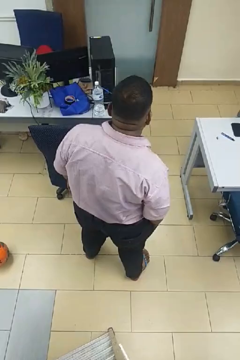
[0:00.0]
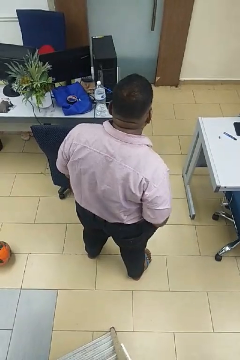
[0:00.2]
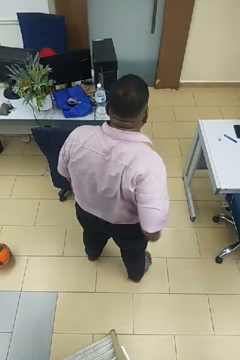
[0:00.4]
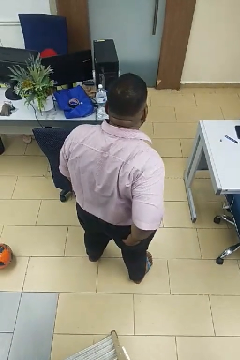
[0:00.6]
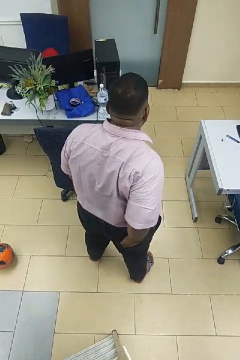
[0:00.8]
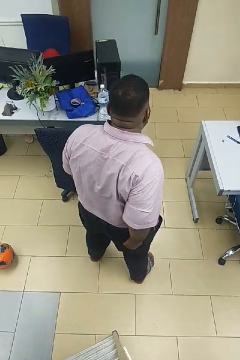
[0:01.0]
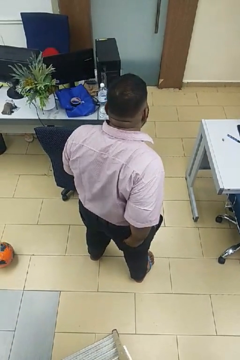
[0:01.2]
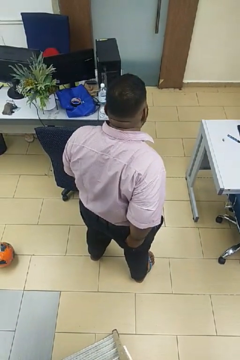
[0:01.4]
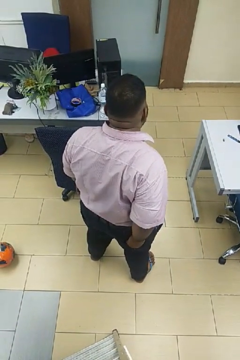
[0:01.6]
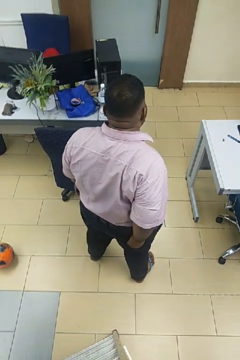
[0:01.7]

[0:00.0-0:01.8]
person puts hands in back pockets

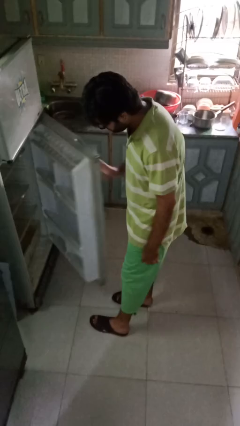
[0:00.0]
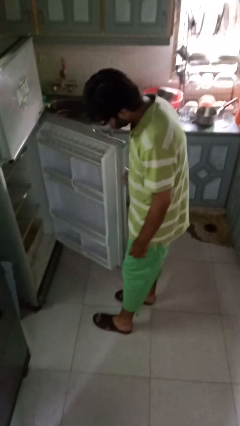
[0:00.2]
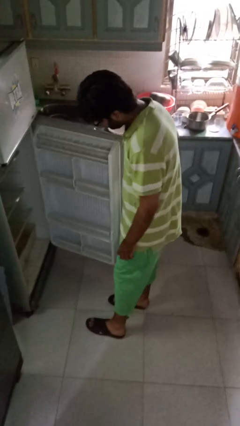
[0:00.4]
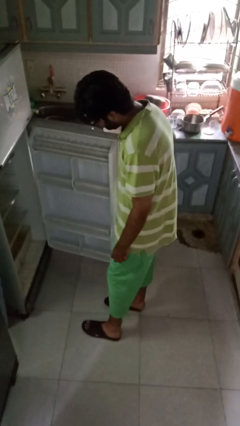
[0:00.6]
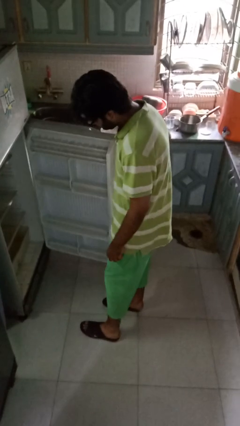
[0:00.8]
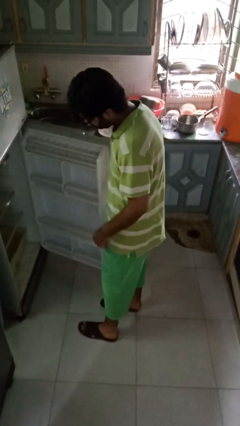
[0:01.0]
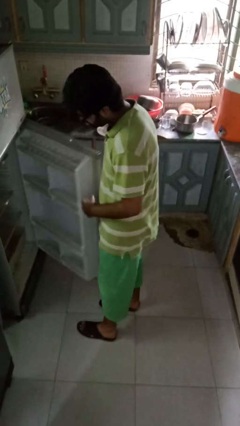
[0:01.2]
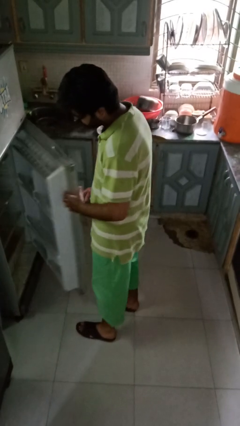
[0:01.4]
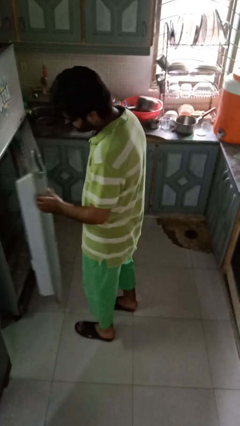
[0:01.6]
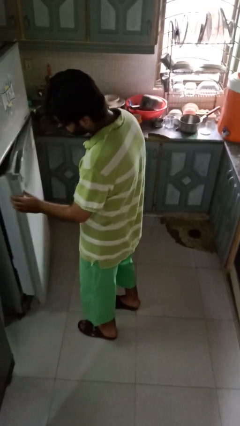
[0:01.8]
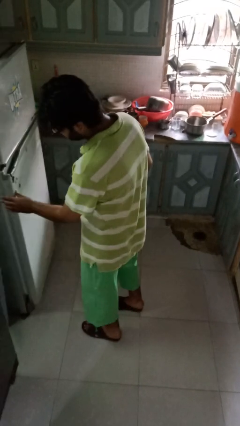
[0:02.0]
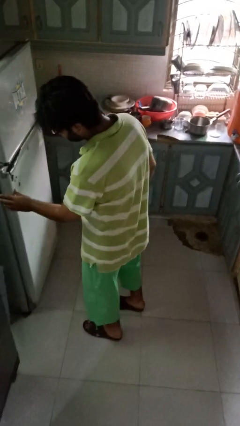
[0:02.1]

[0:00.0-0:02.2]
person closes refrigerator

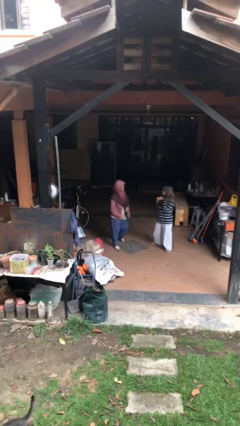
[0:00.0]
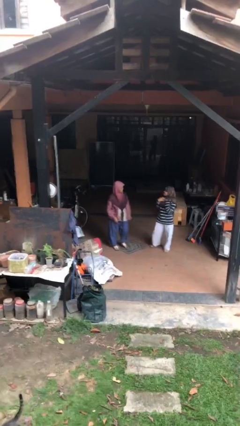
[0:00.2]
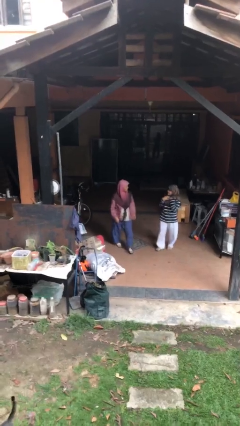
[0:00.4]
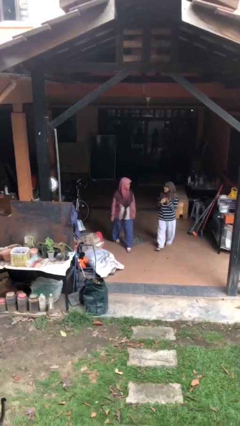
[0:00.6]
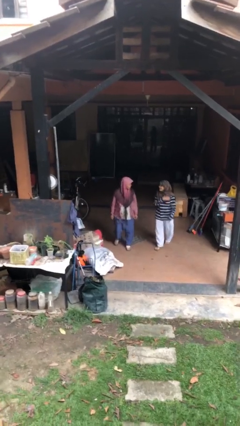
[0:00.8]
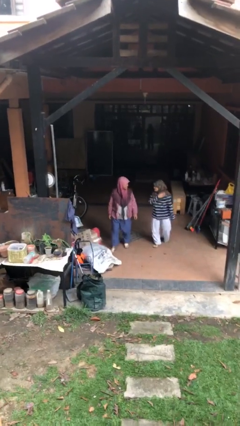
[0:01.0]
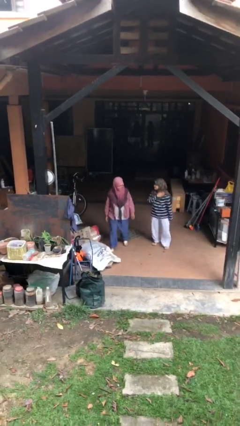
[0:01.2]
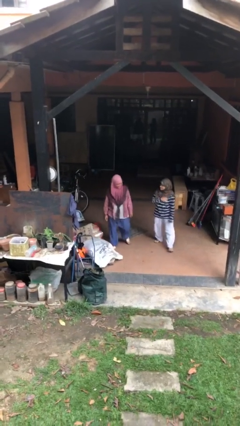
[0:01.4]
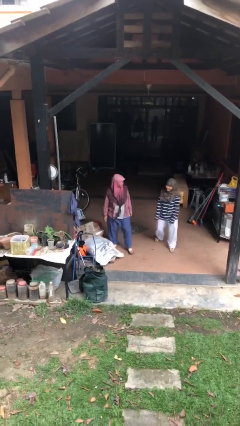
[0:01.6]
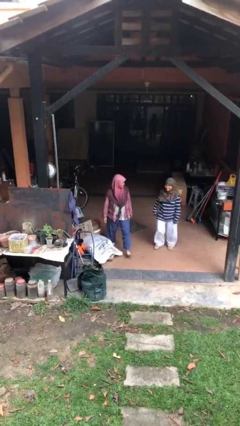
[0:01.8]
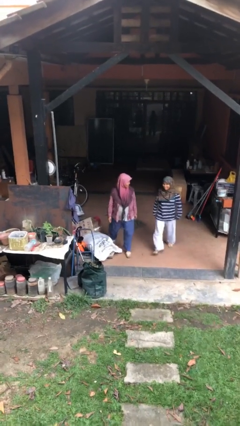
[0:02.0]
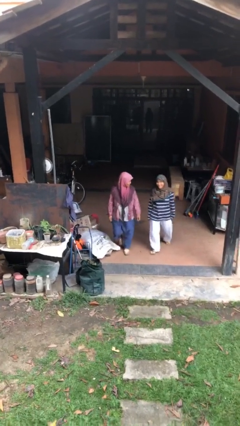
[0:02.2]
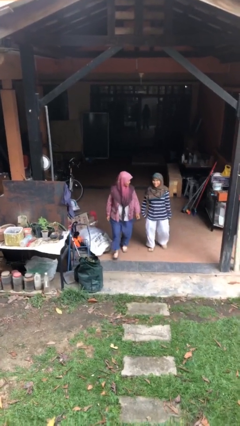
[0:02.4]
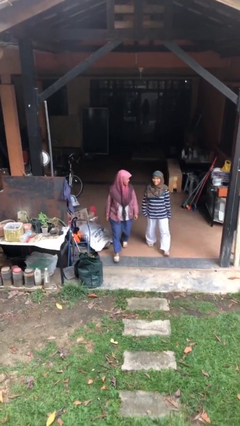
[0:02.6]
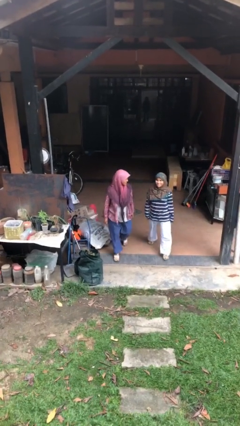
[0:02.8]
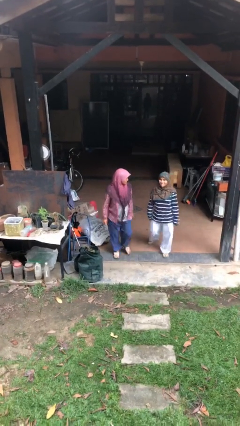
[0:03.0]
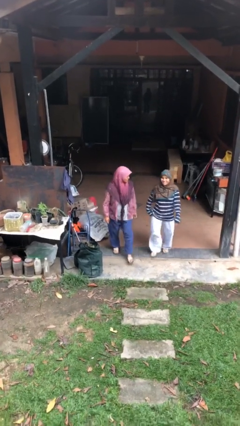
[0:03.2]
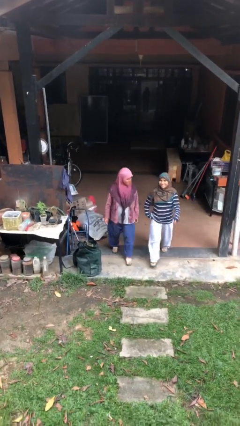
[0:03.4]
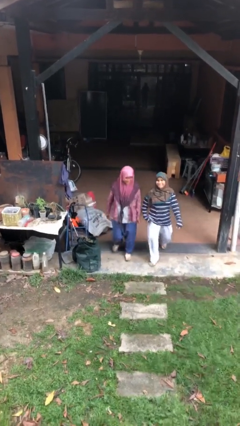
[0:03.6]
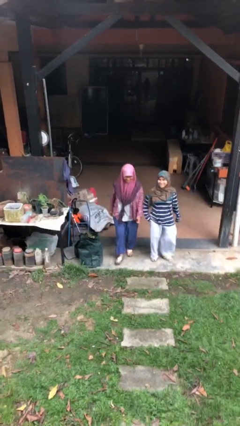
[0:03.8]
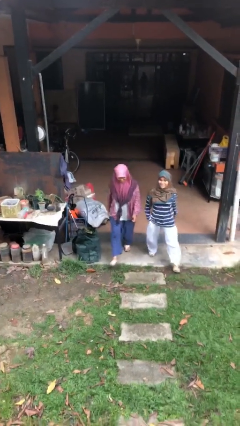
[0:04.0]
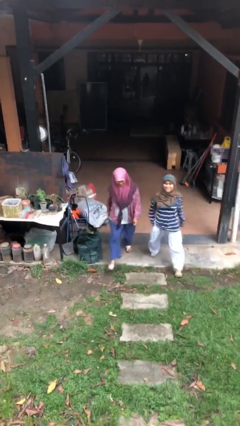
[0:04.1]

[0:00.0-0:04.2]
person talks to person

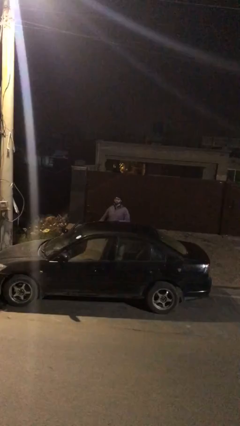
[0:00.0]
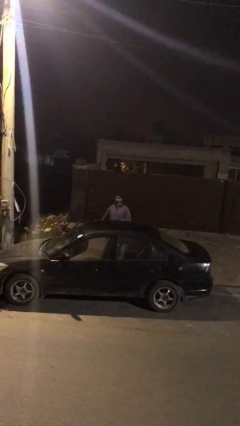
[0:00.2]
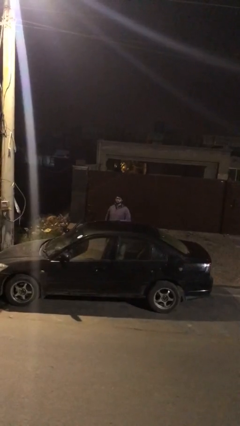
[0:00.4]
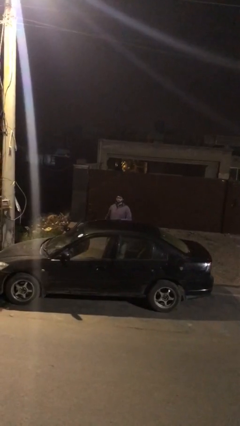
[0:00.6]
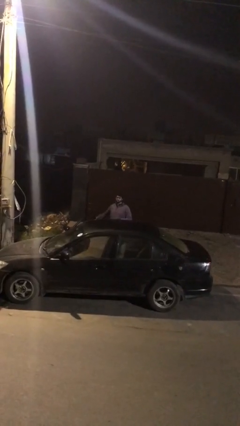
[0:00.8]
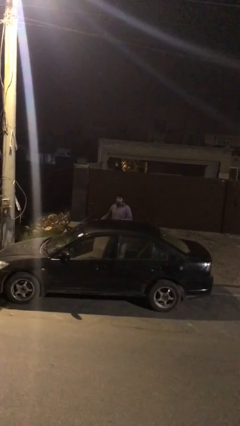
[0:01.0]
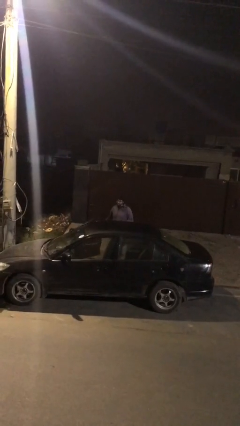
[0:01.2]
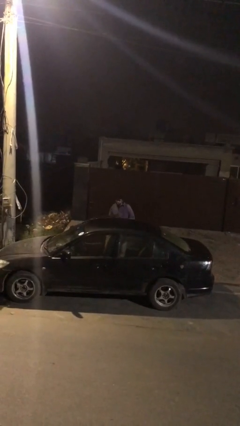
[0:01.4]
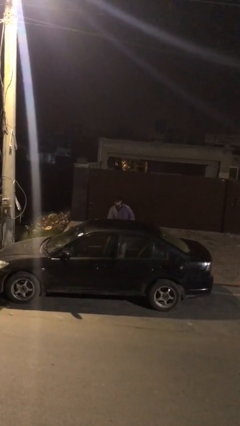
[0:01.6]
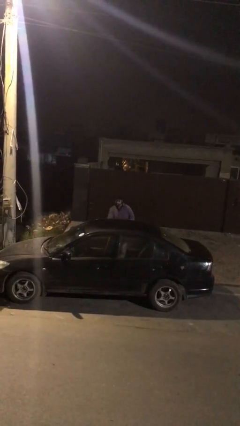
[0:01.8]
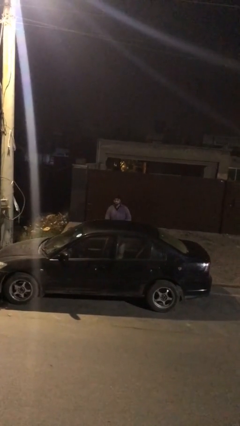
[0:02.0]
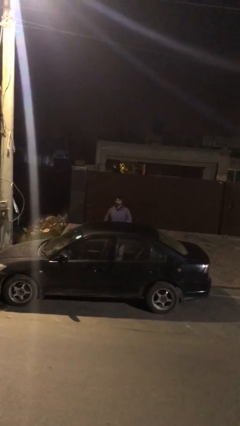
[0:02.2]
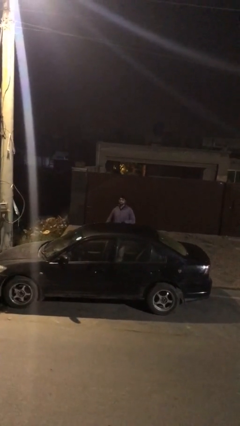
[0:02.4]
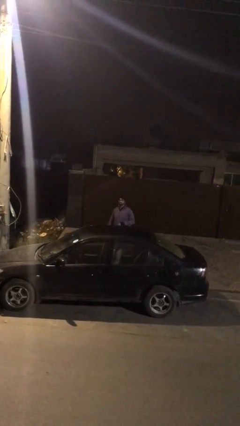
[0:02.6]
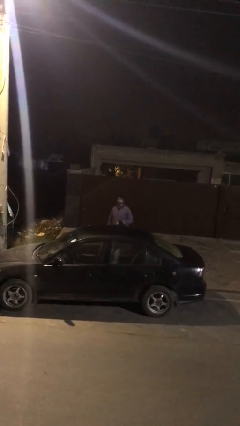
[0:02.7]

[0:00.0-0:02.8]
person closes car door

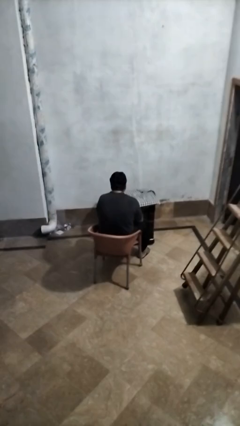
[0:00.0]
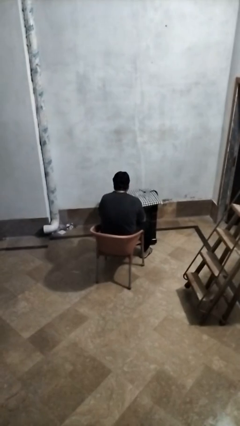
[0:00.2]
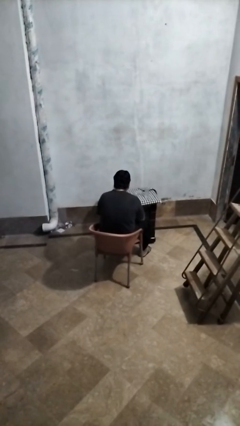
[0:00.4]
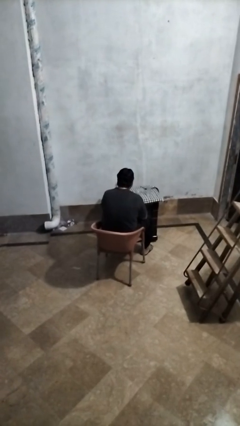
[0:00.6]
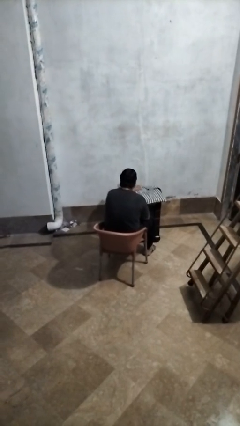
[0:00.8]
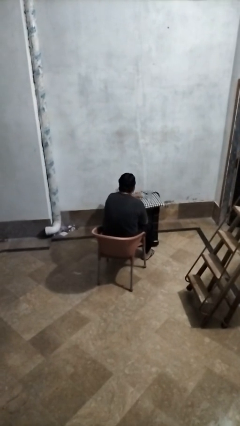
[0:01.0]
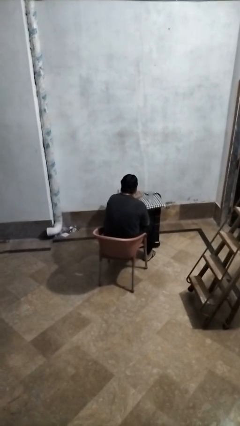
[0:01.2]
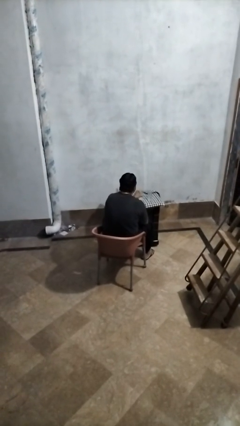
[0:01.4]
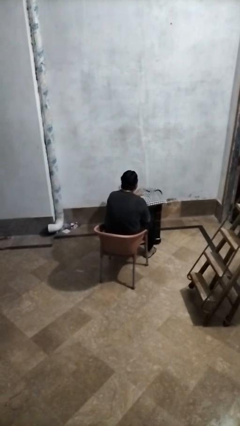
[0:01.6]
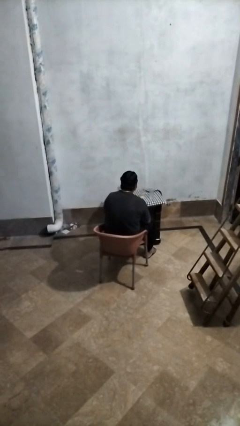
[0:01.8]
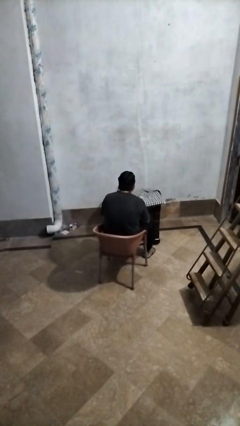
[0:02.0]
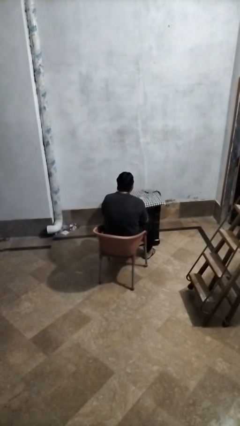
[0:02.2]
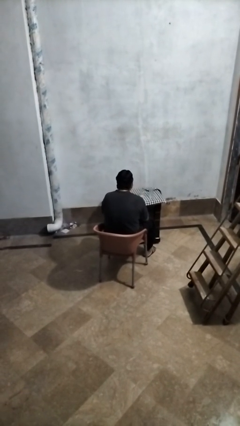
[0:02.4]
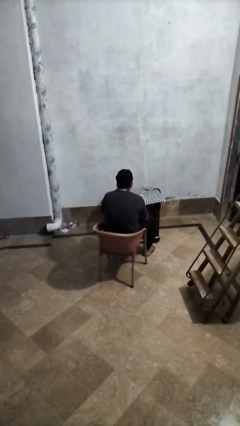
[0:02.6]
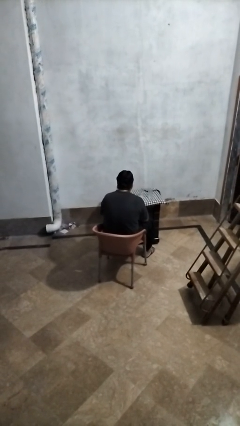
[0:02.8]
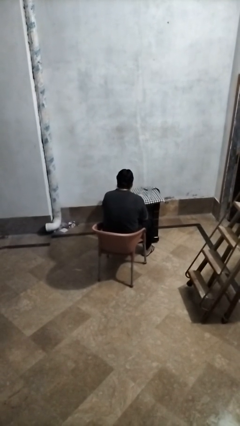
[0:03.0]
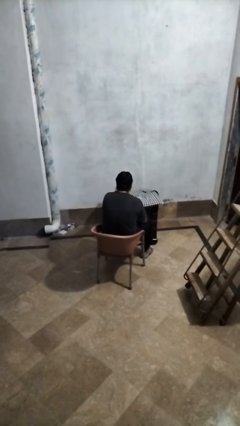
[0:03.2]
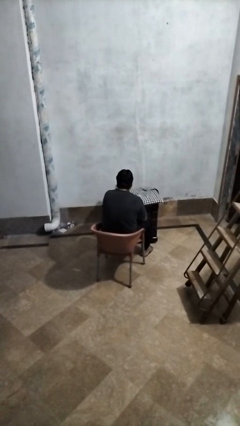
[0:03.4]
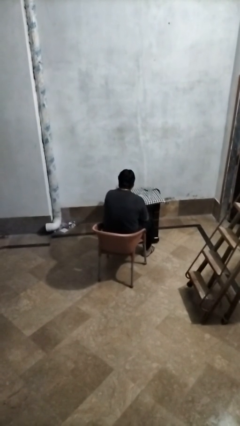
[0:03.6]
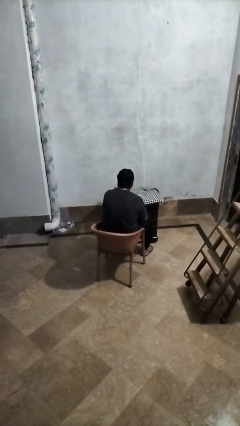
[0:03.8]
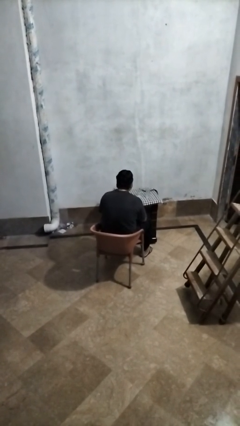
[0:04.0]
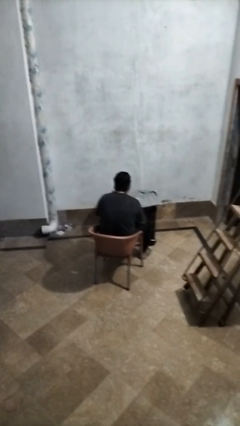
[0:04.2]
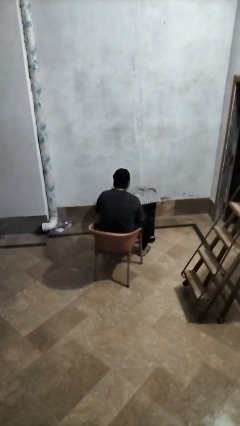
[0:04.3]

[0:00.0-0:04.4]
person sets upright glass

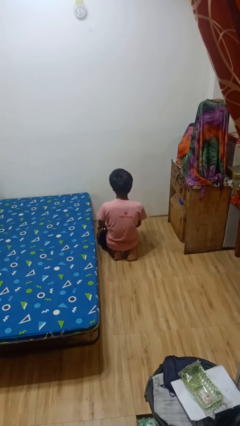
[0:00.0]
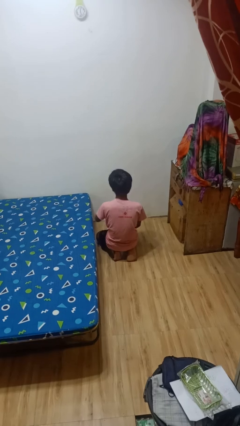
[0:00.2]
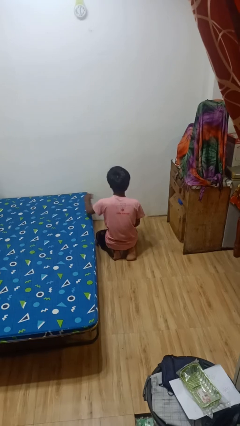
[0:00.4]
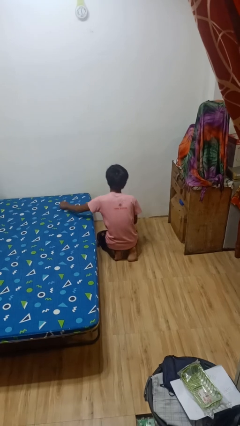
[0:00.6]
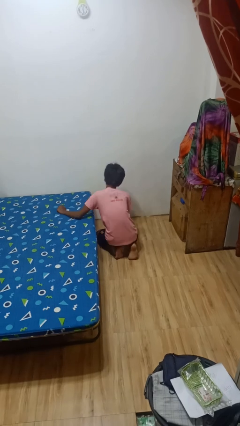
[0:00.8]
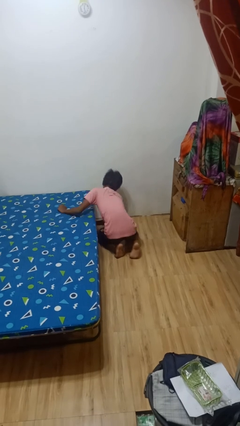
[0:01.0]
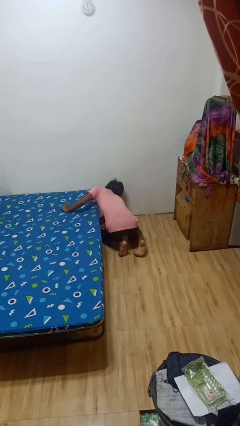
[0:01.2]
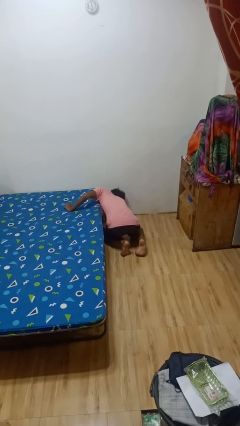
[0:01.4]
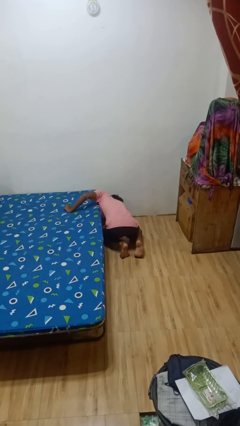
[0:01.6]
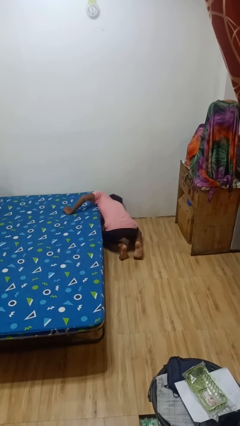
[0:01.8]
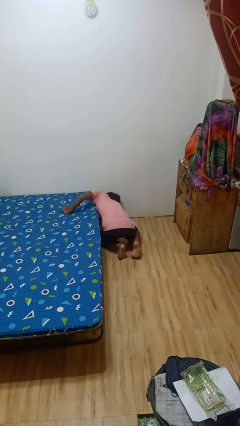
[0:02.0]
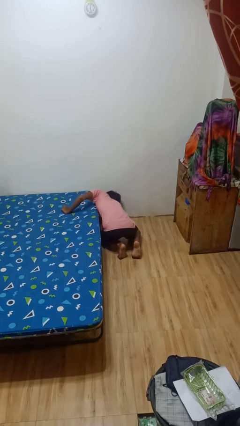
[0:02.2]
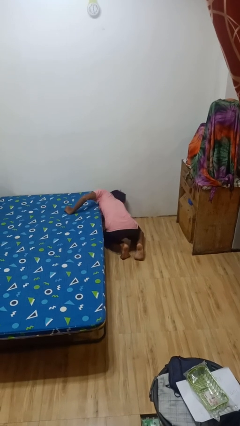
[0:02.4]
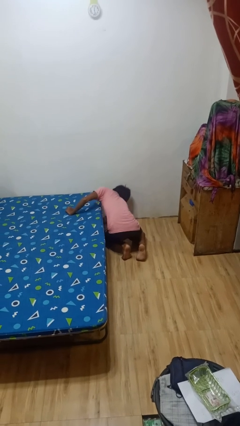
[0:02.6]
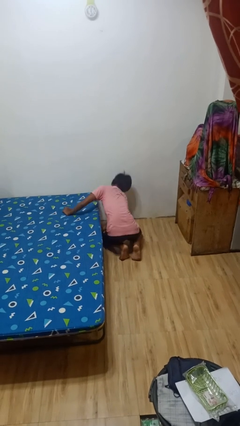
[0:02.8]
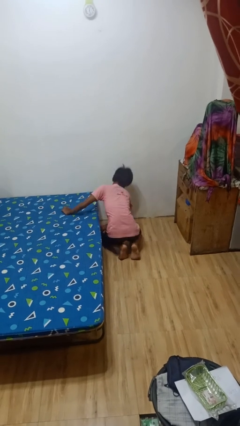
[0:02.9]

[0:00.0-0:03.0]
person searches under bed
